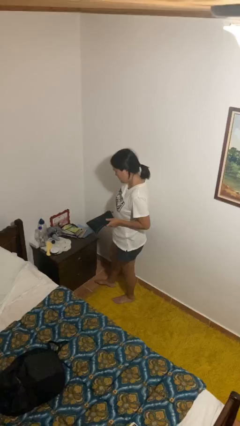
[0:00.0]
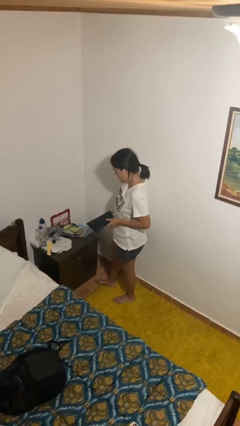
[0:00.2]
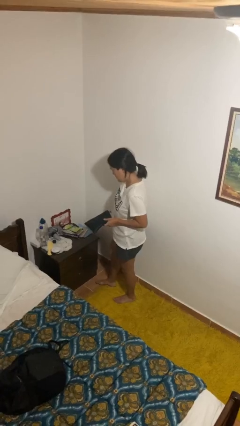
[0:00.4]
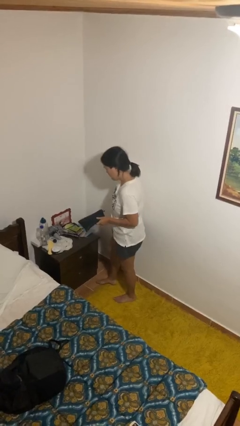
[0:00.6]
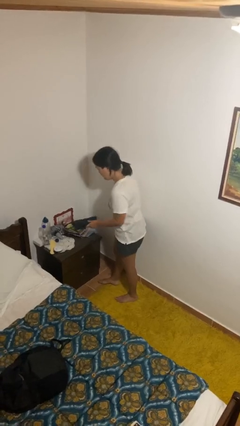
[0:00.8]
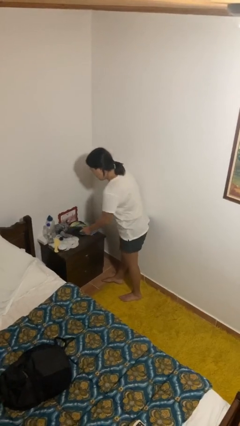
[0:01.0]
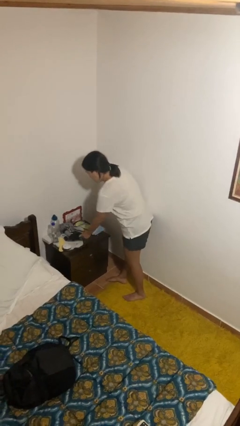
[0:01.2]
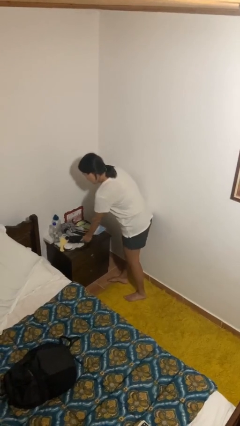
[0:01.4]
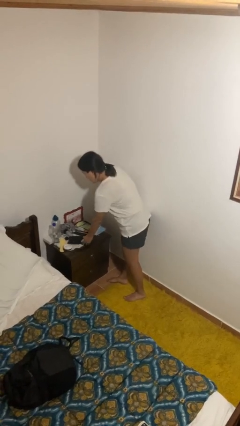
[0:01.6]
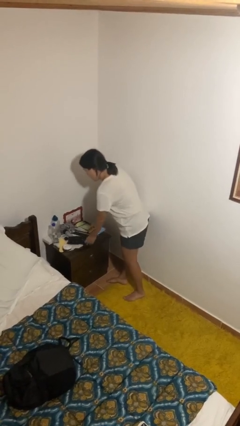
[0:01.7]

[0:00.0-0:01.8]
person puts down object on countertop

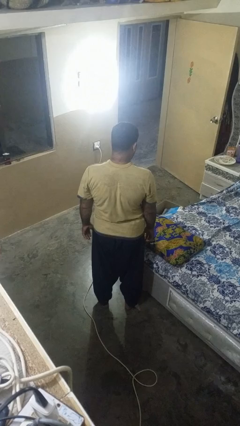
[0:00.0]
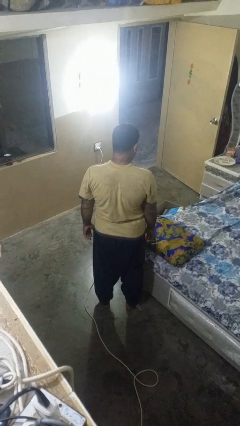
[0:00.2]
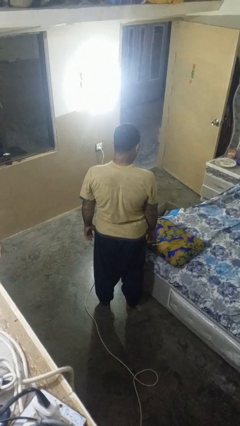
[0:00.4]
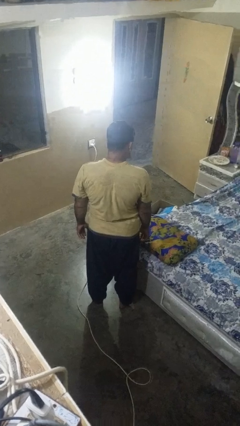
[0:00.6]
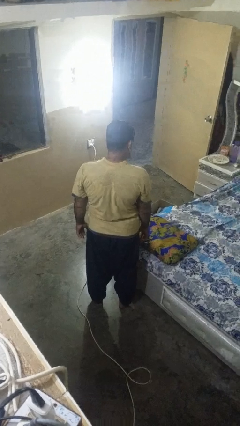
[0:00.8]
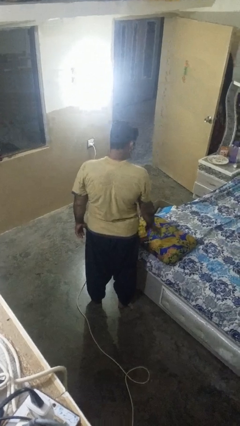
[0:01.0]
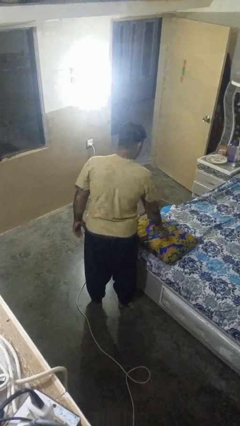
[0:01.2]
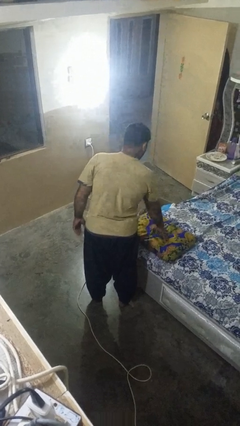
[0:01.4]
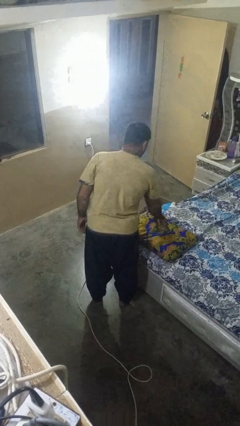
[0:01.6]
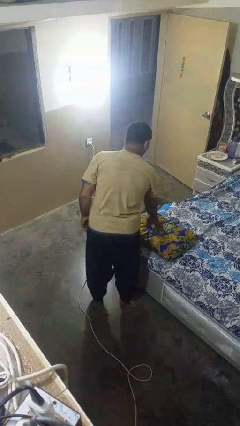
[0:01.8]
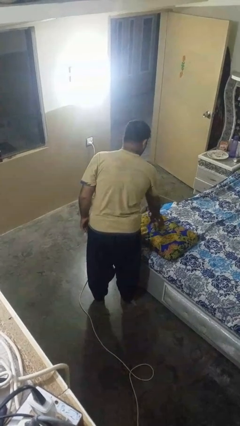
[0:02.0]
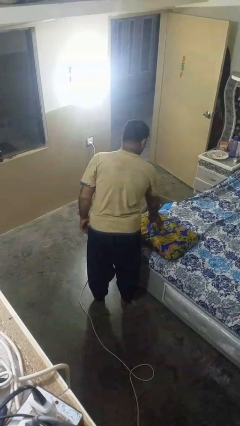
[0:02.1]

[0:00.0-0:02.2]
person taps object with finger

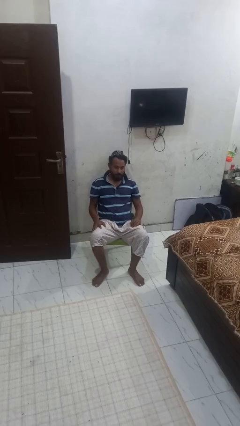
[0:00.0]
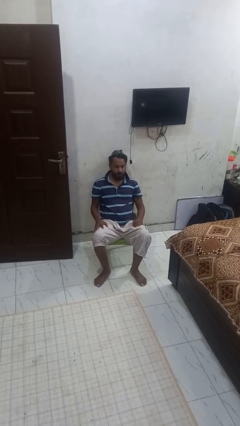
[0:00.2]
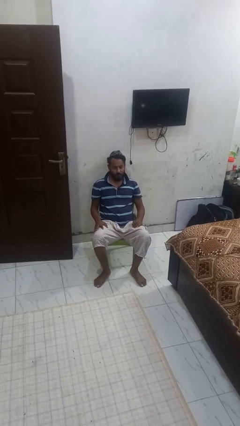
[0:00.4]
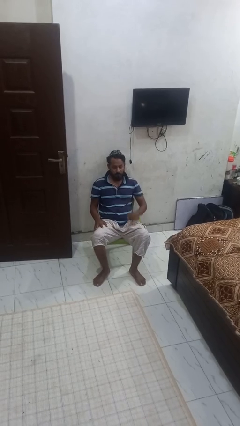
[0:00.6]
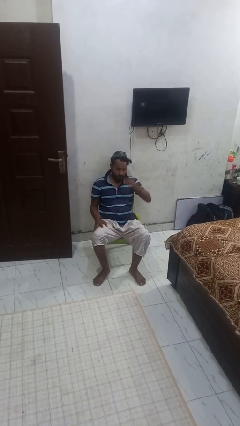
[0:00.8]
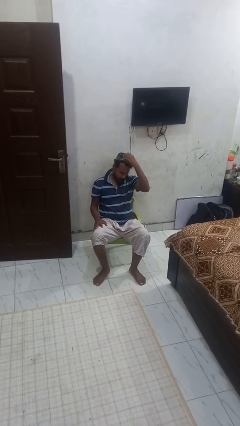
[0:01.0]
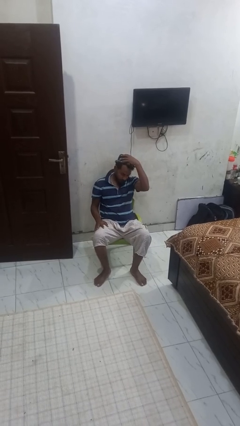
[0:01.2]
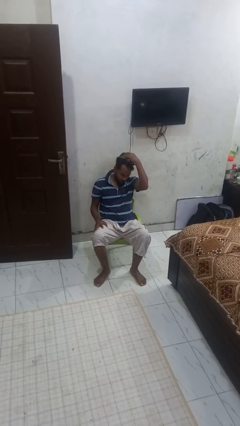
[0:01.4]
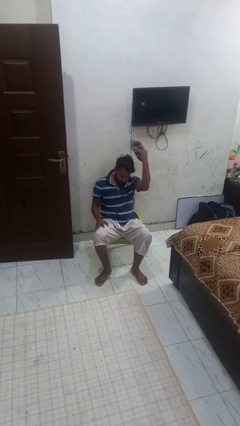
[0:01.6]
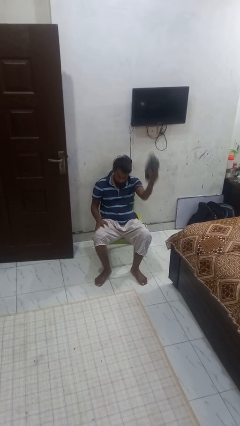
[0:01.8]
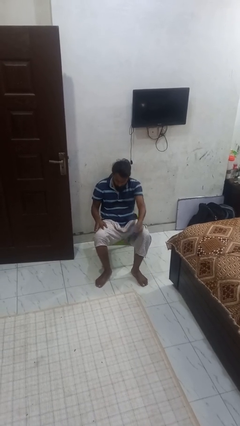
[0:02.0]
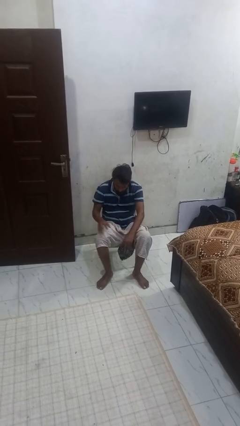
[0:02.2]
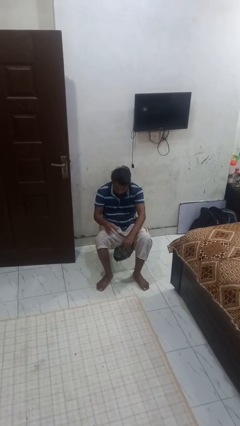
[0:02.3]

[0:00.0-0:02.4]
person takes off hat

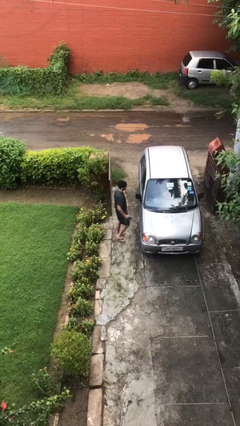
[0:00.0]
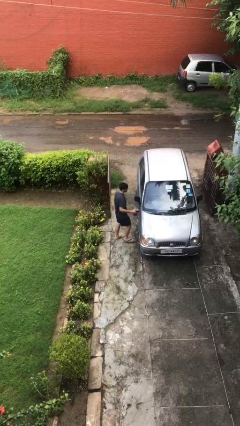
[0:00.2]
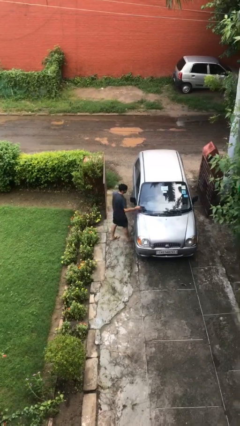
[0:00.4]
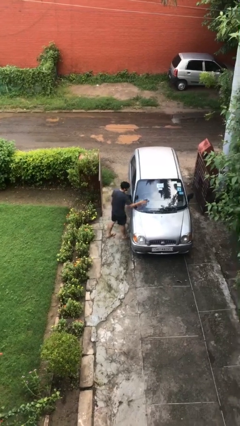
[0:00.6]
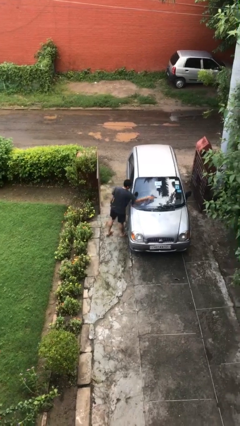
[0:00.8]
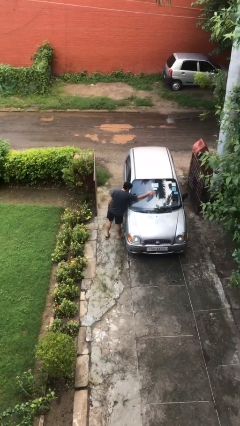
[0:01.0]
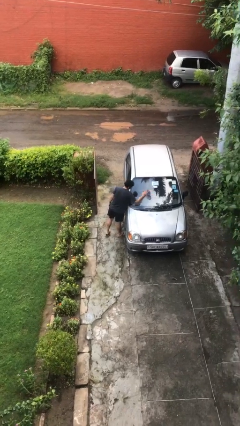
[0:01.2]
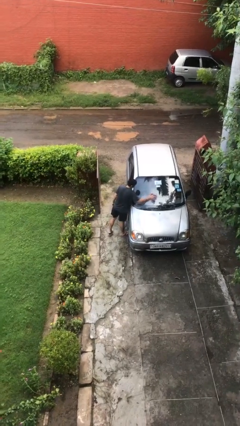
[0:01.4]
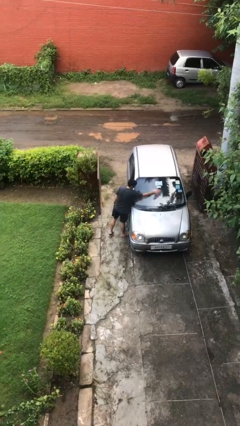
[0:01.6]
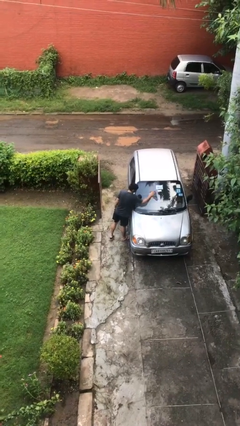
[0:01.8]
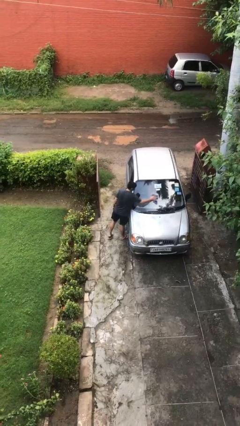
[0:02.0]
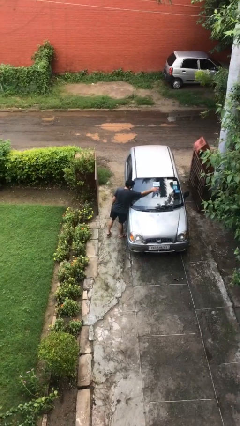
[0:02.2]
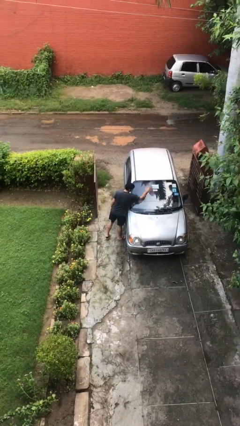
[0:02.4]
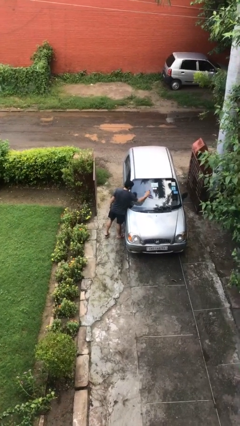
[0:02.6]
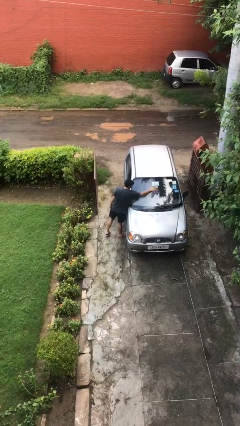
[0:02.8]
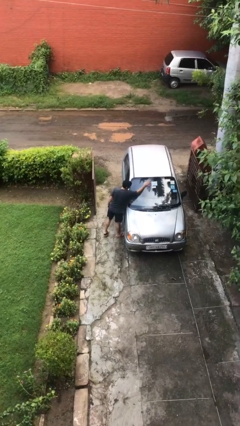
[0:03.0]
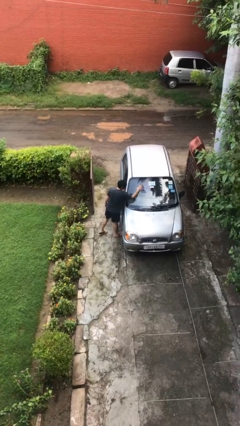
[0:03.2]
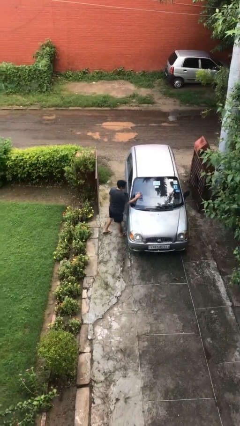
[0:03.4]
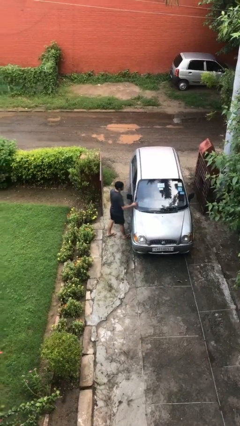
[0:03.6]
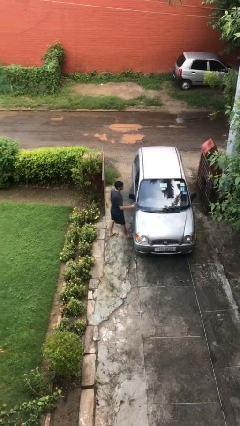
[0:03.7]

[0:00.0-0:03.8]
person polishes car with rag

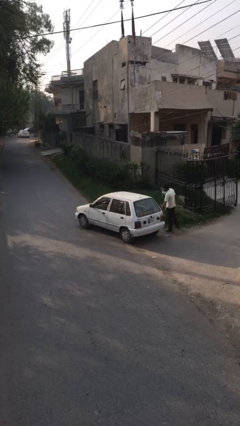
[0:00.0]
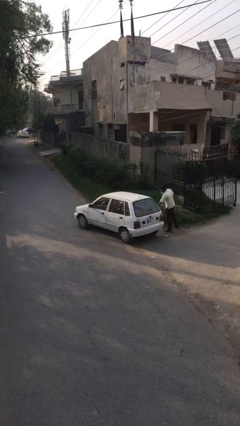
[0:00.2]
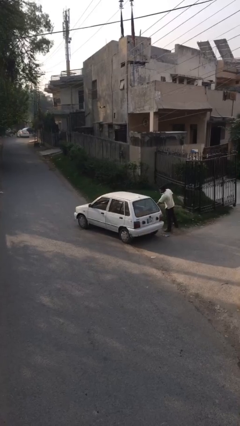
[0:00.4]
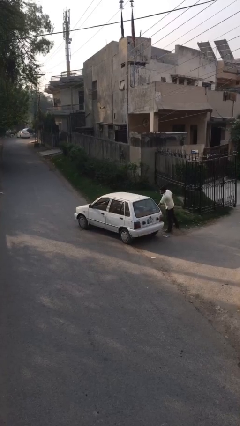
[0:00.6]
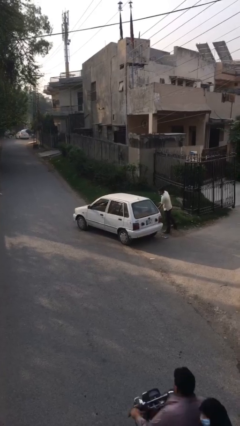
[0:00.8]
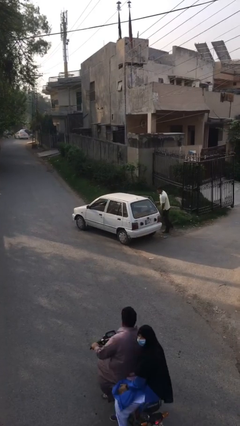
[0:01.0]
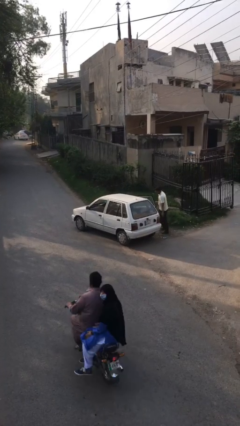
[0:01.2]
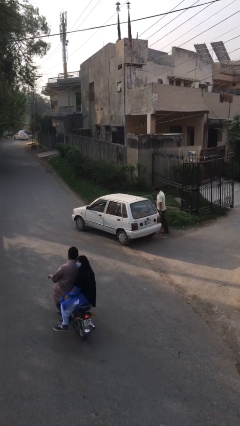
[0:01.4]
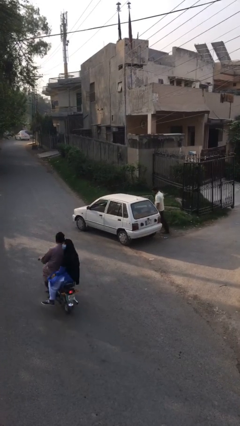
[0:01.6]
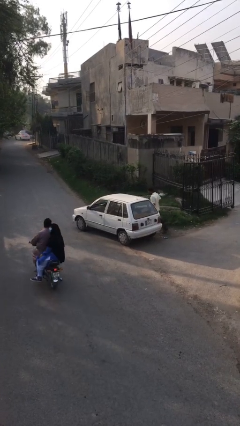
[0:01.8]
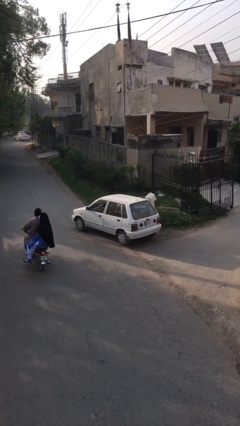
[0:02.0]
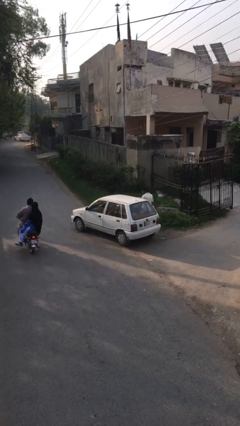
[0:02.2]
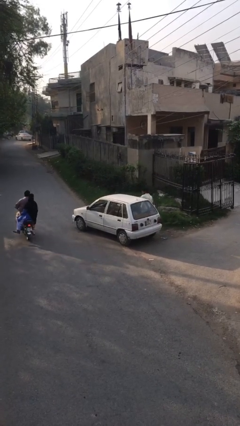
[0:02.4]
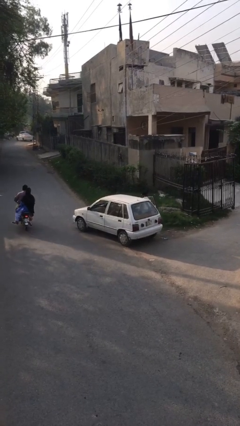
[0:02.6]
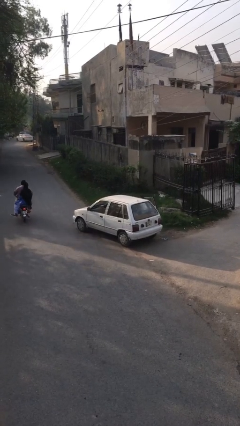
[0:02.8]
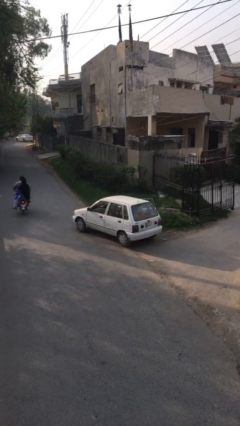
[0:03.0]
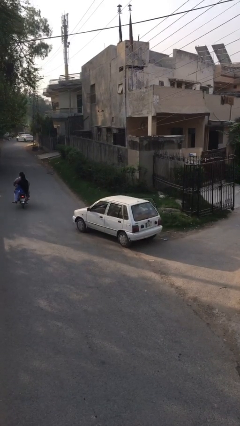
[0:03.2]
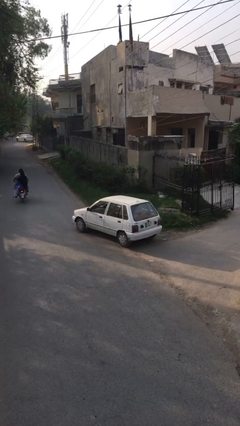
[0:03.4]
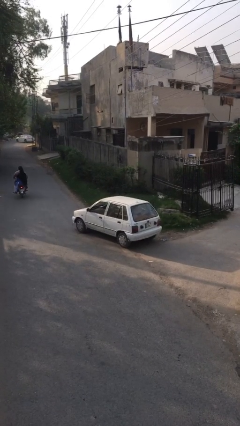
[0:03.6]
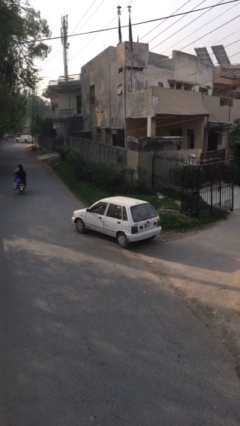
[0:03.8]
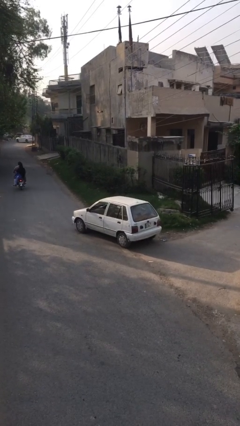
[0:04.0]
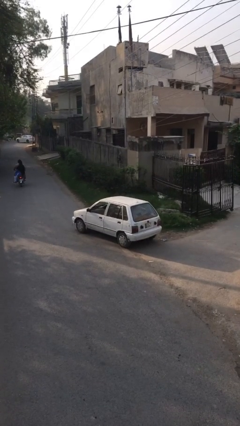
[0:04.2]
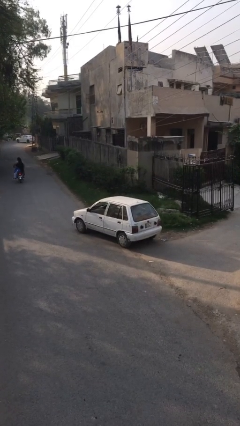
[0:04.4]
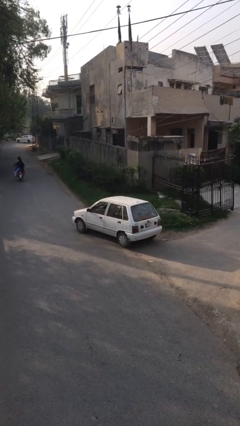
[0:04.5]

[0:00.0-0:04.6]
car picks up person

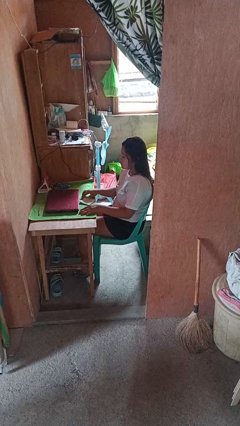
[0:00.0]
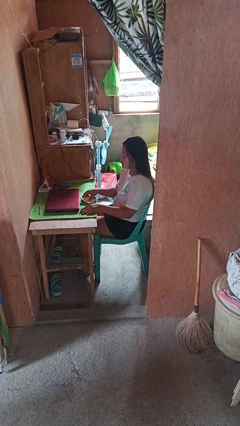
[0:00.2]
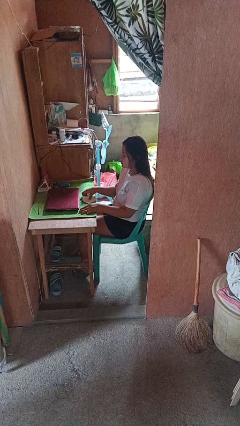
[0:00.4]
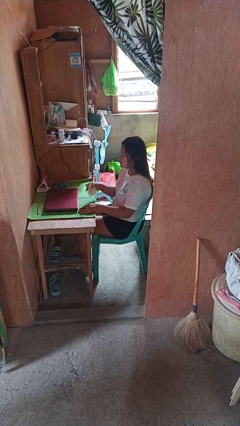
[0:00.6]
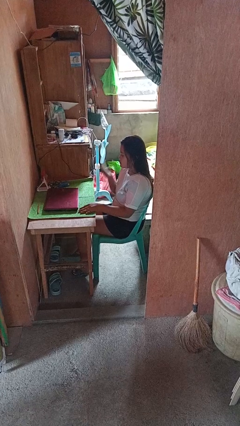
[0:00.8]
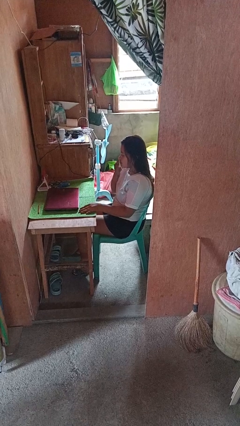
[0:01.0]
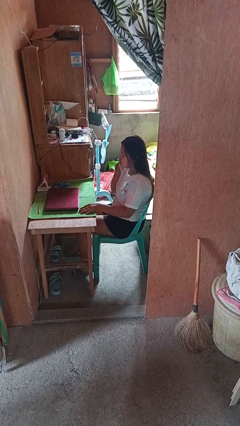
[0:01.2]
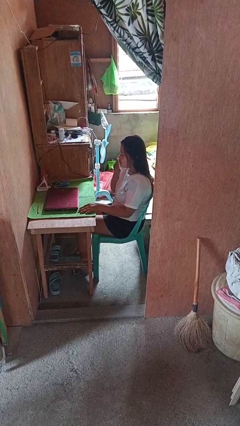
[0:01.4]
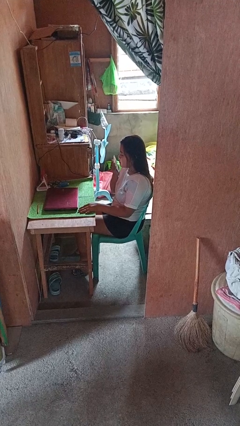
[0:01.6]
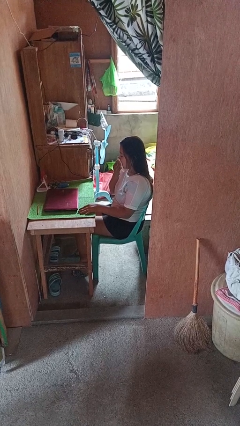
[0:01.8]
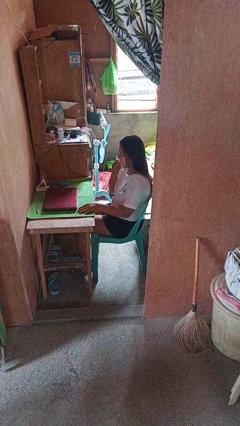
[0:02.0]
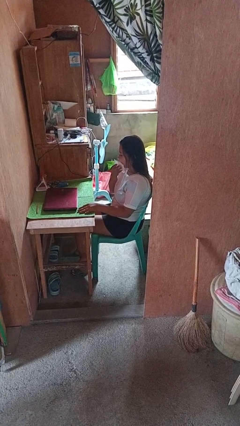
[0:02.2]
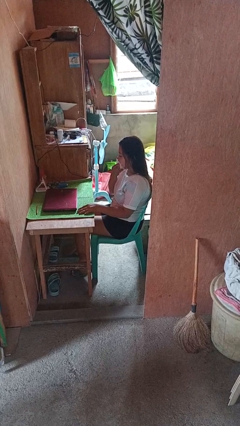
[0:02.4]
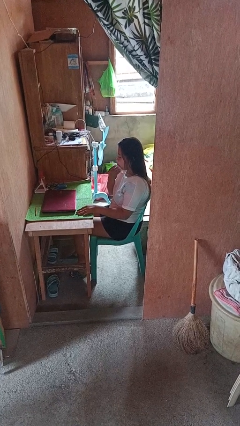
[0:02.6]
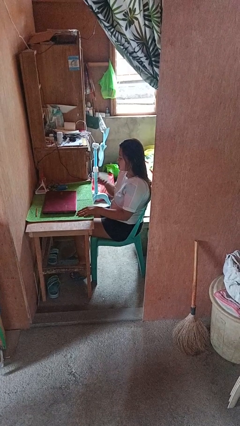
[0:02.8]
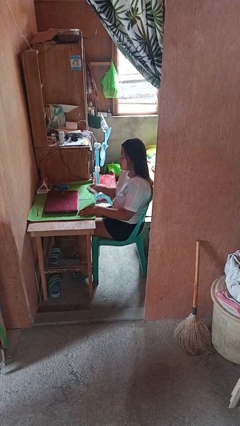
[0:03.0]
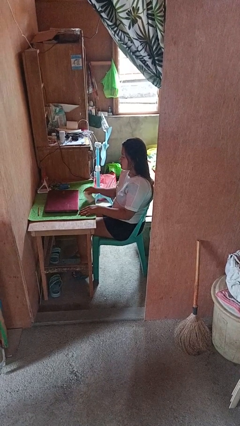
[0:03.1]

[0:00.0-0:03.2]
person wipes mouth with napkin
